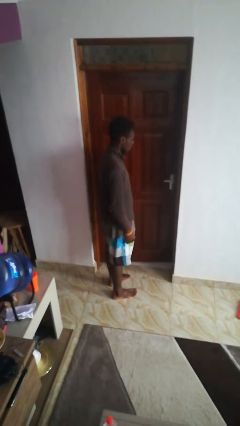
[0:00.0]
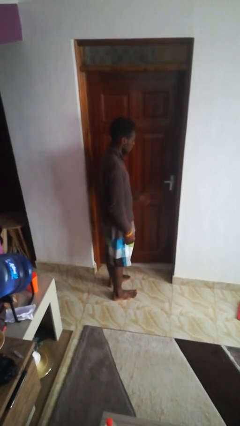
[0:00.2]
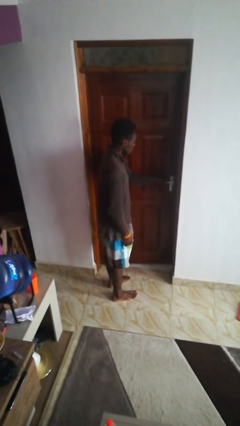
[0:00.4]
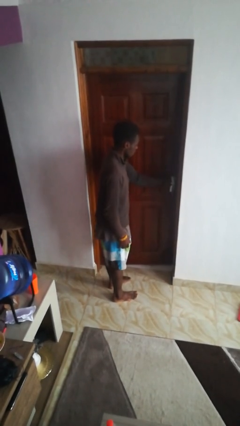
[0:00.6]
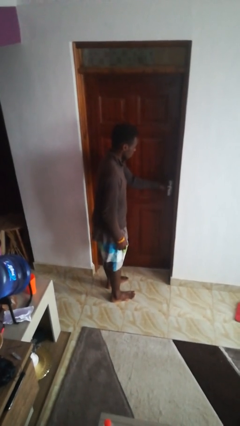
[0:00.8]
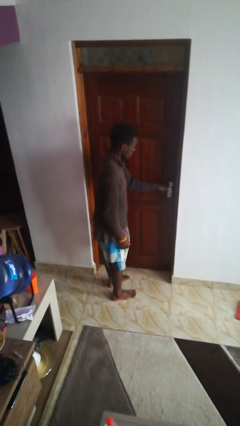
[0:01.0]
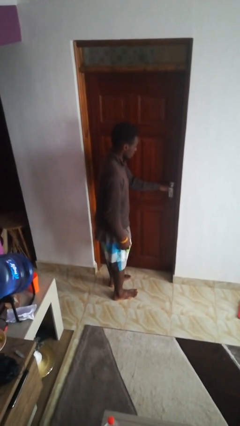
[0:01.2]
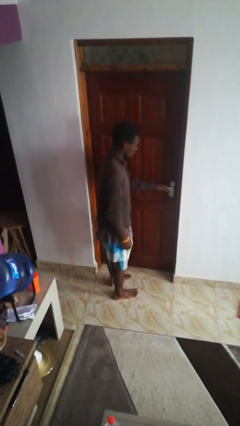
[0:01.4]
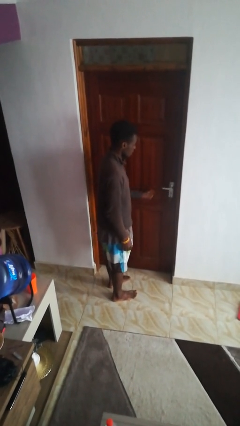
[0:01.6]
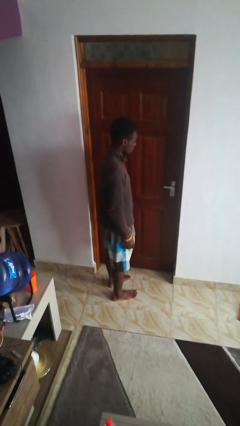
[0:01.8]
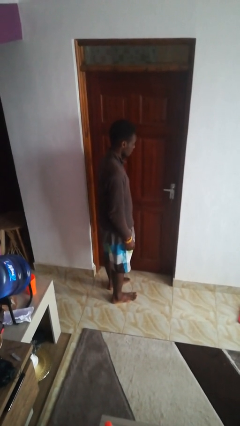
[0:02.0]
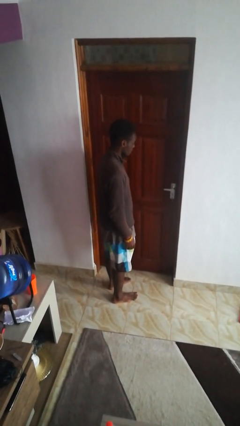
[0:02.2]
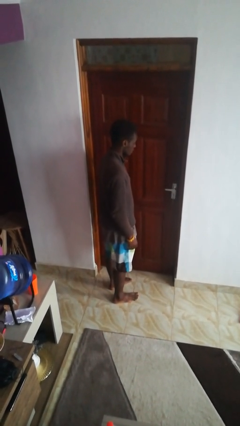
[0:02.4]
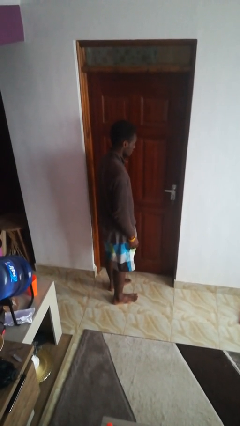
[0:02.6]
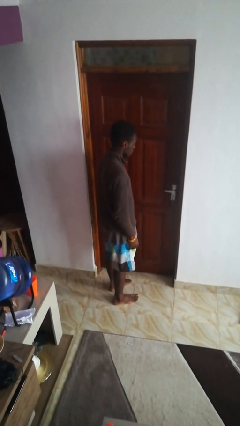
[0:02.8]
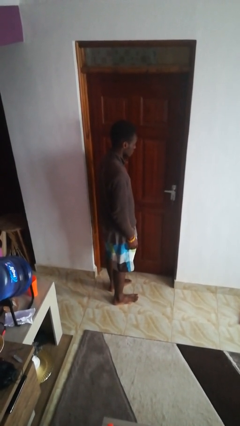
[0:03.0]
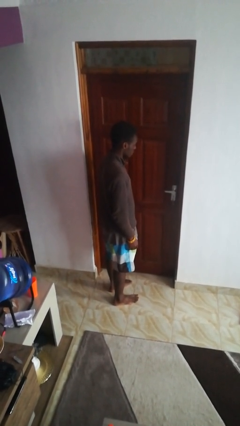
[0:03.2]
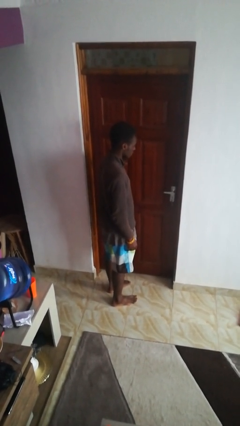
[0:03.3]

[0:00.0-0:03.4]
person closes facility door

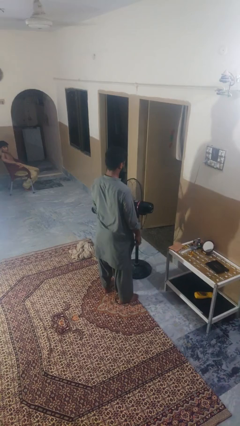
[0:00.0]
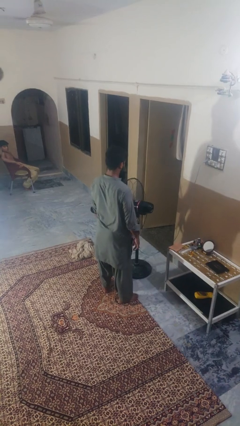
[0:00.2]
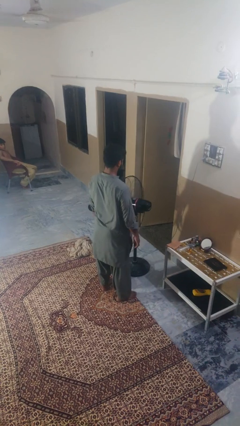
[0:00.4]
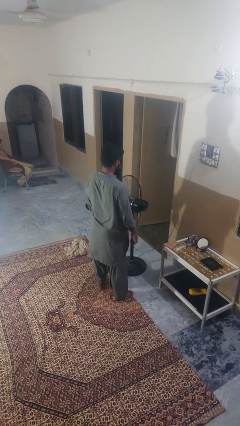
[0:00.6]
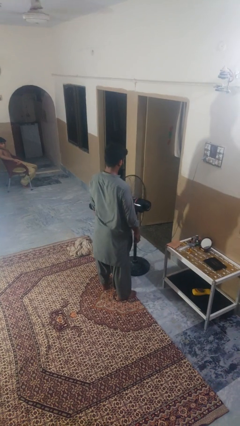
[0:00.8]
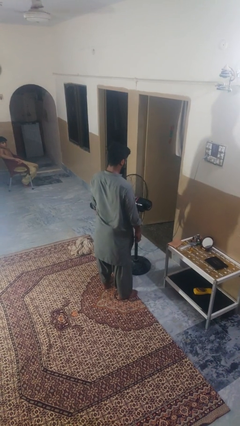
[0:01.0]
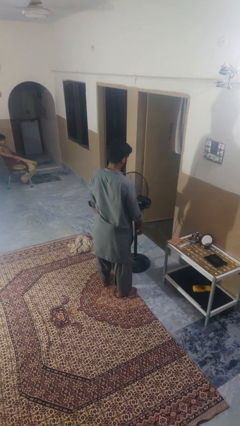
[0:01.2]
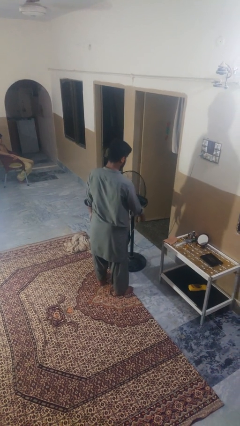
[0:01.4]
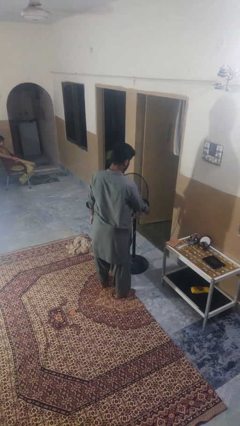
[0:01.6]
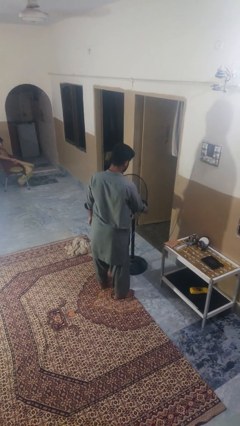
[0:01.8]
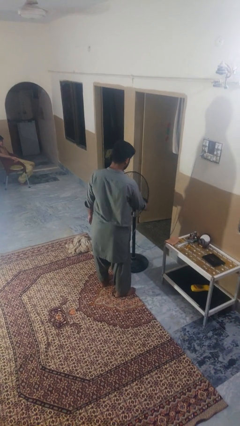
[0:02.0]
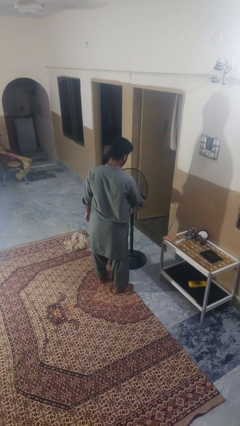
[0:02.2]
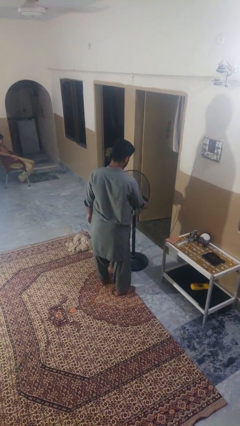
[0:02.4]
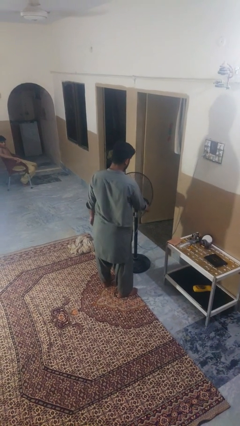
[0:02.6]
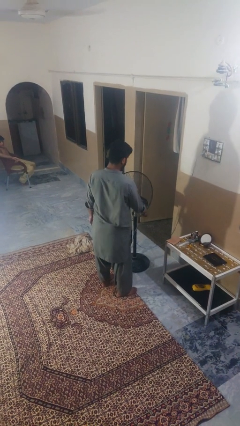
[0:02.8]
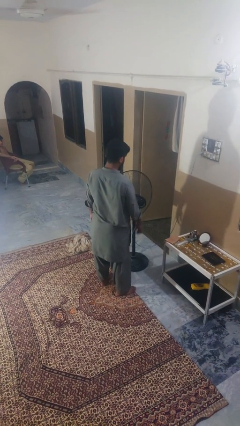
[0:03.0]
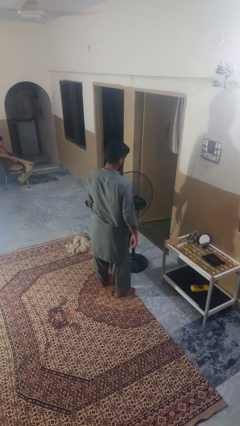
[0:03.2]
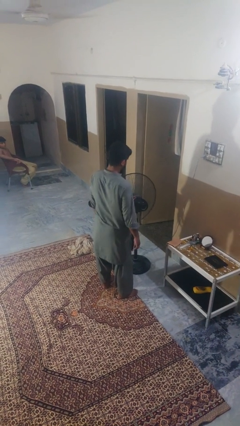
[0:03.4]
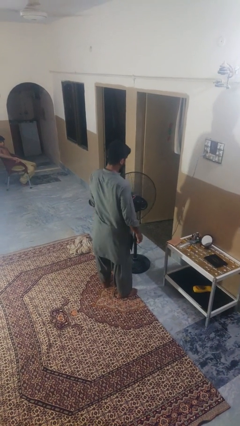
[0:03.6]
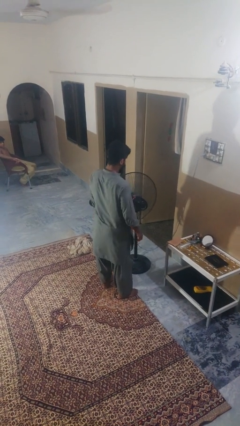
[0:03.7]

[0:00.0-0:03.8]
person turns on fan

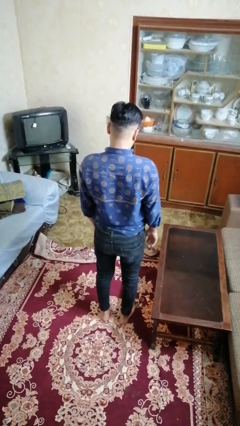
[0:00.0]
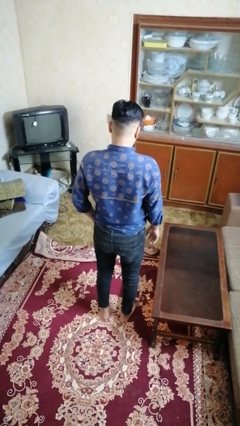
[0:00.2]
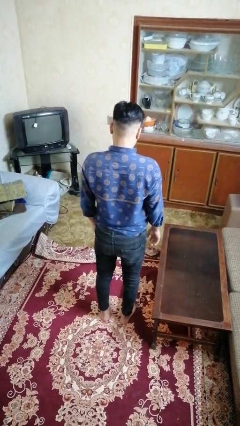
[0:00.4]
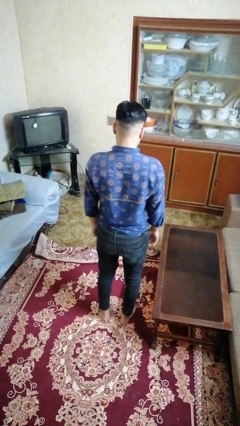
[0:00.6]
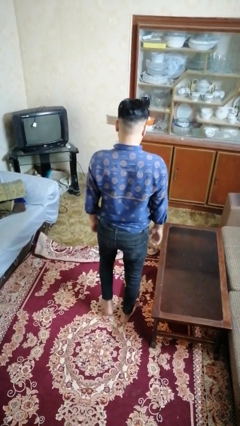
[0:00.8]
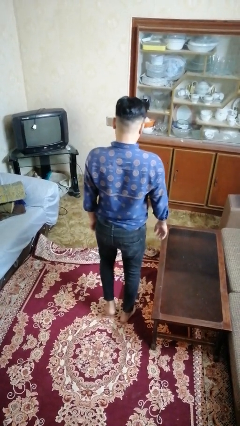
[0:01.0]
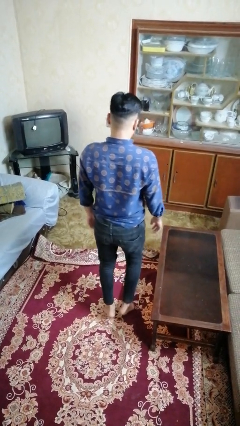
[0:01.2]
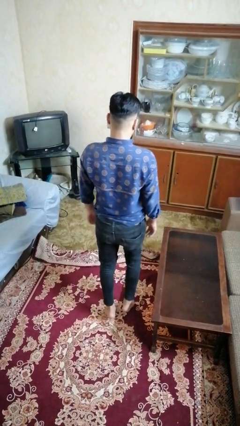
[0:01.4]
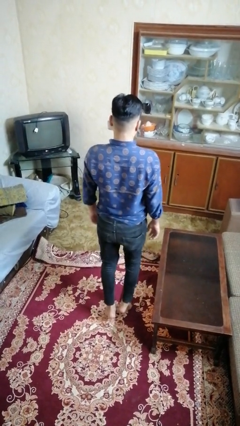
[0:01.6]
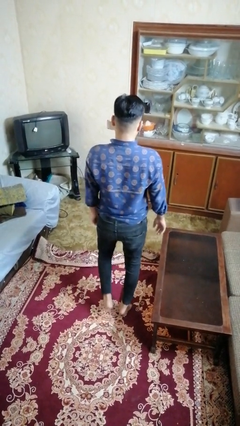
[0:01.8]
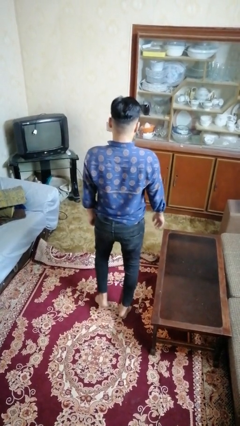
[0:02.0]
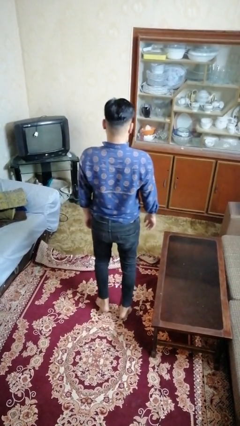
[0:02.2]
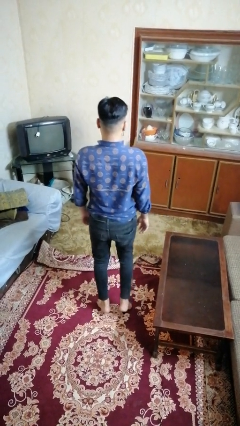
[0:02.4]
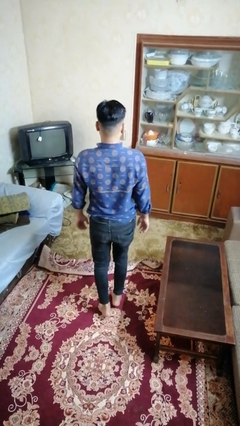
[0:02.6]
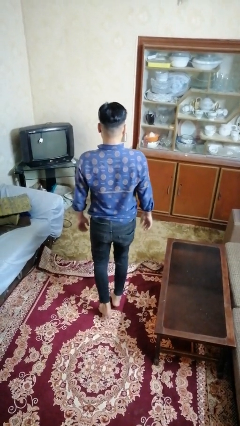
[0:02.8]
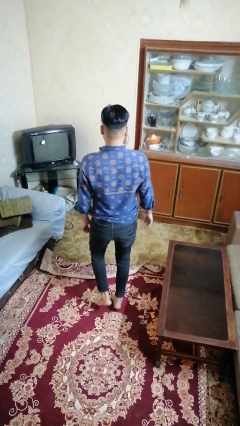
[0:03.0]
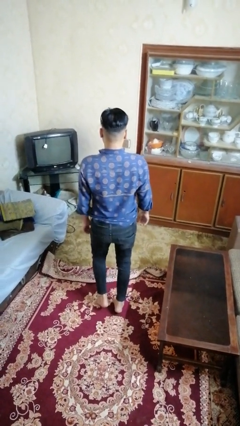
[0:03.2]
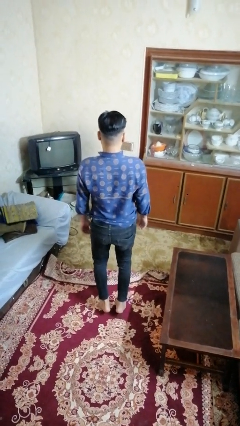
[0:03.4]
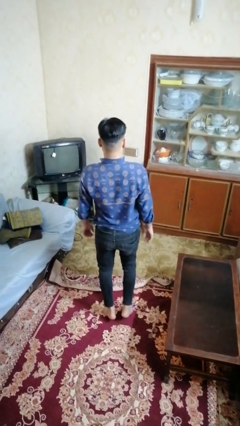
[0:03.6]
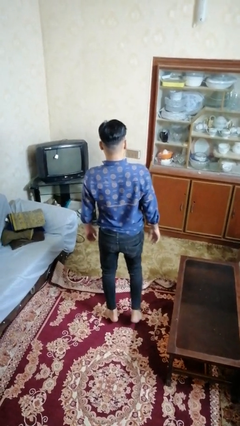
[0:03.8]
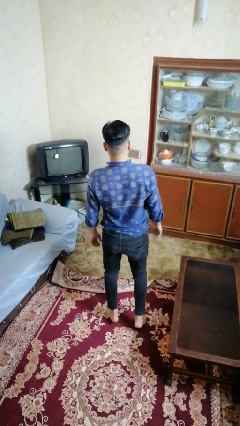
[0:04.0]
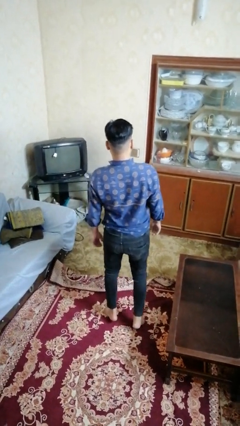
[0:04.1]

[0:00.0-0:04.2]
person walks tiptoe

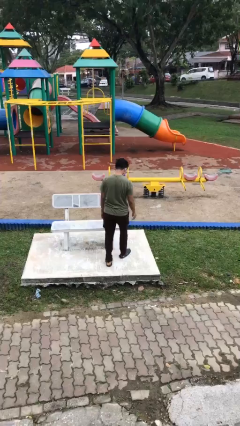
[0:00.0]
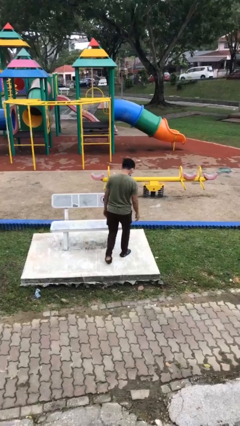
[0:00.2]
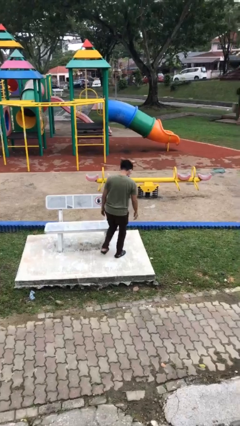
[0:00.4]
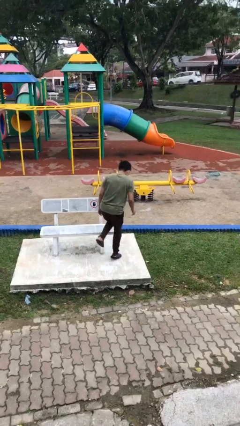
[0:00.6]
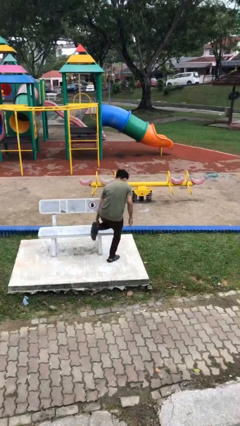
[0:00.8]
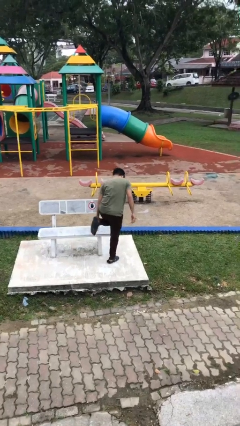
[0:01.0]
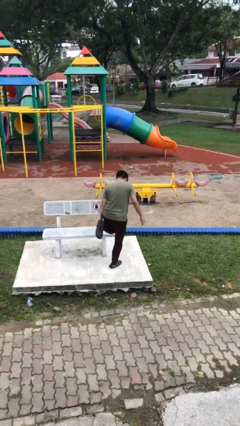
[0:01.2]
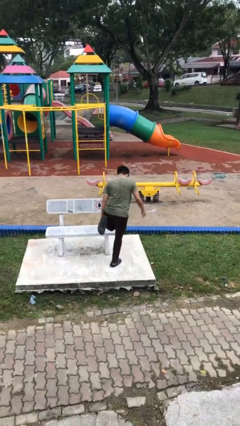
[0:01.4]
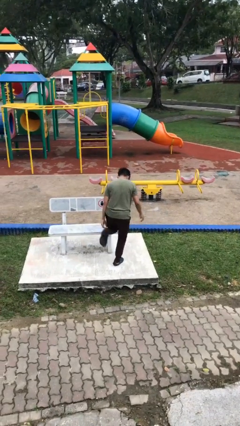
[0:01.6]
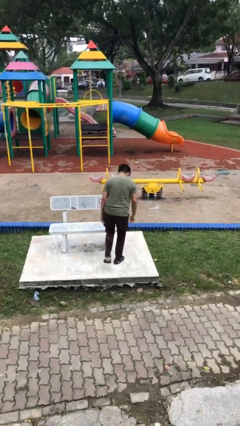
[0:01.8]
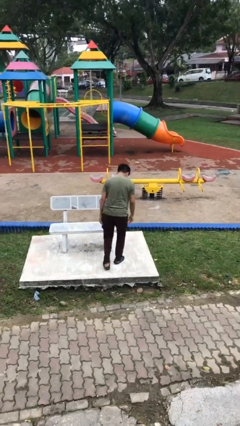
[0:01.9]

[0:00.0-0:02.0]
person stubs toe

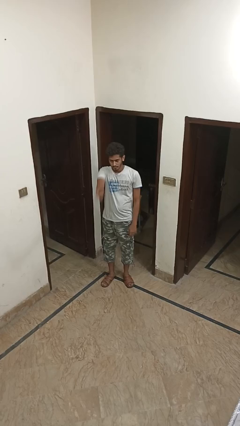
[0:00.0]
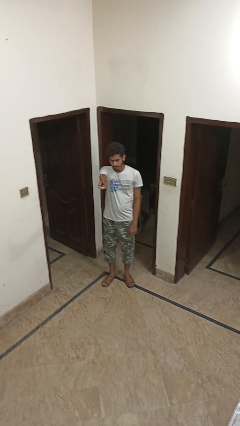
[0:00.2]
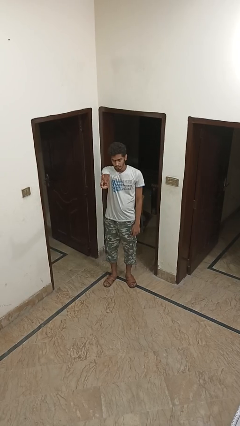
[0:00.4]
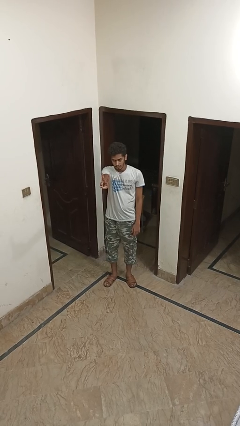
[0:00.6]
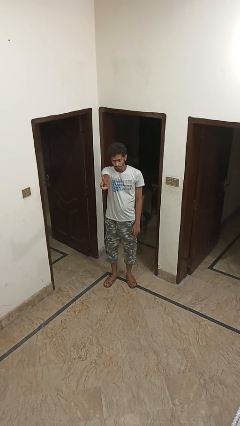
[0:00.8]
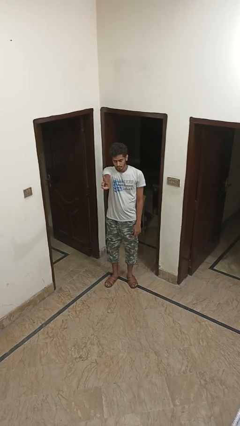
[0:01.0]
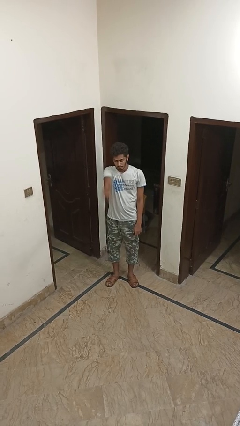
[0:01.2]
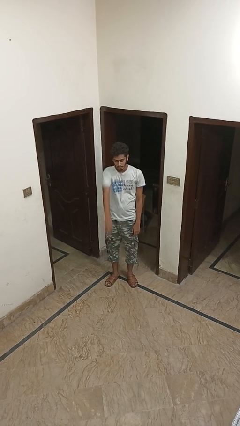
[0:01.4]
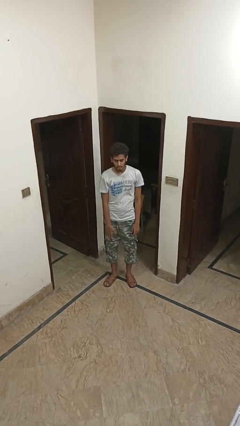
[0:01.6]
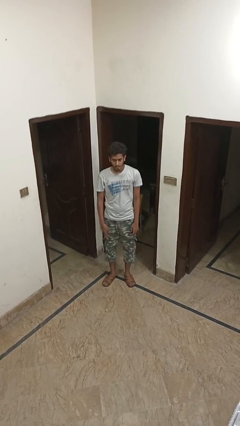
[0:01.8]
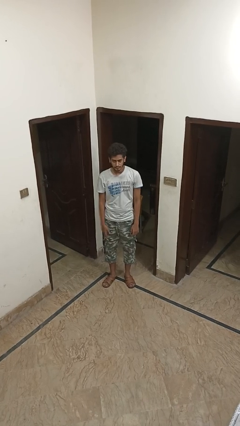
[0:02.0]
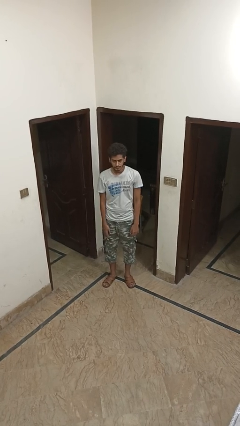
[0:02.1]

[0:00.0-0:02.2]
person gestures peace

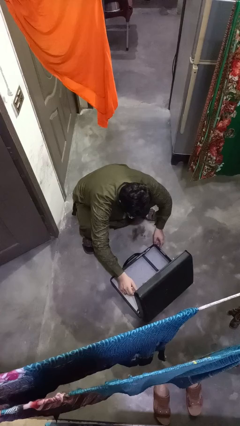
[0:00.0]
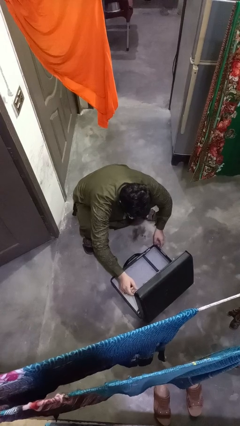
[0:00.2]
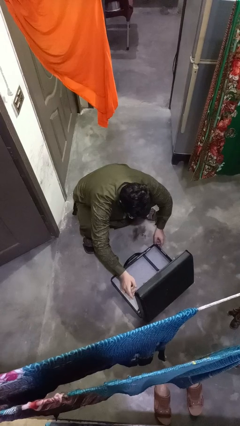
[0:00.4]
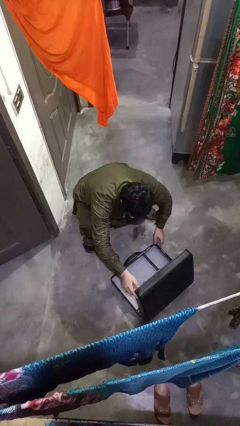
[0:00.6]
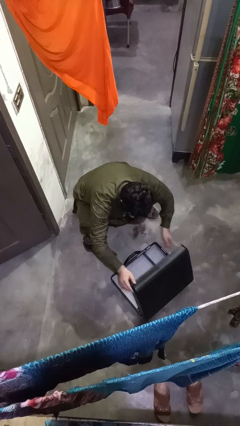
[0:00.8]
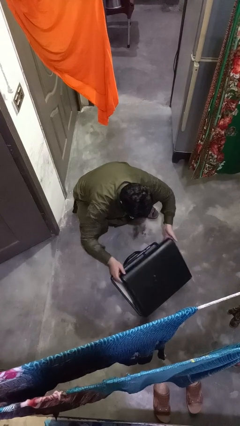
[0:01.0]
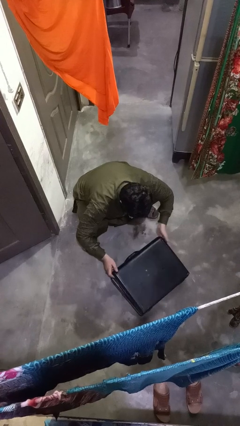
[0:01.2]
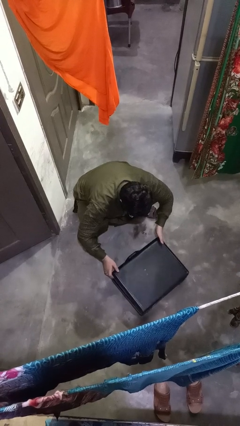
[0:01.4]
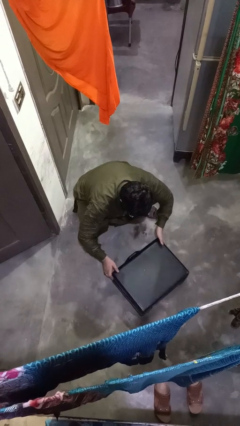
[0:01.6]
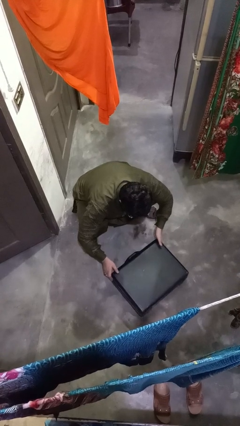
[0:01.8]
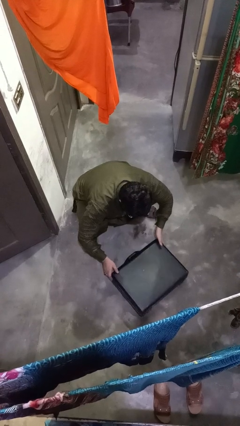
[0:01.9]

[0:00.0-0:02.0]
person closes suitcase
